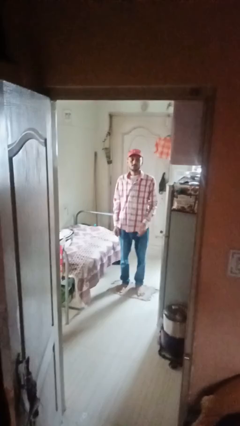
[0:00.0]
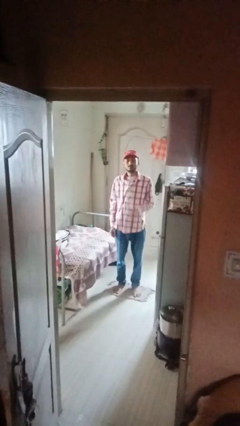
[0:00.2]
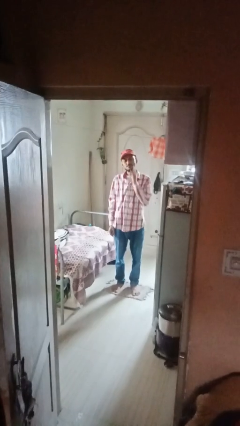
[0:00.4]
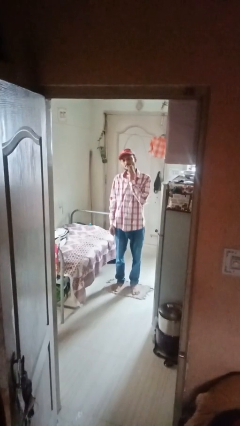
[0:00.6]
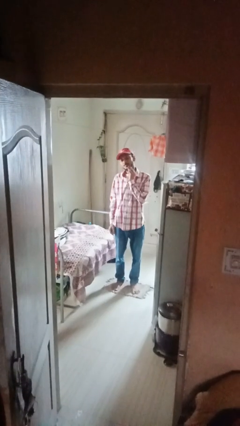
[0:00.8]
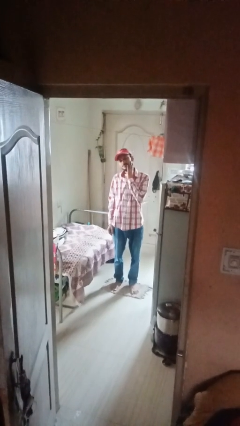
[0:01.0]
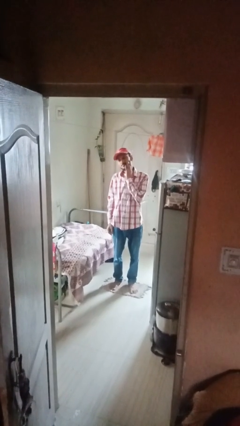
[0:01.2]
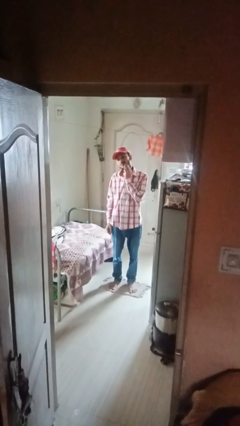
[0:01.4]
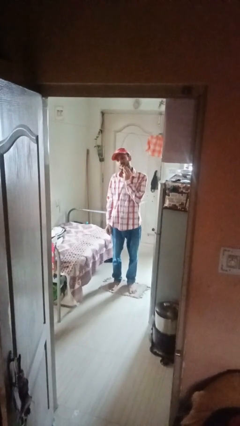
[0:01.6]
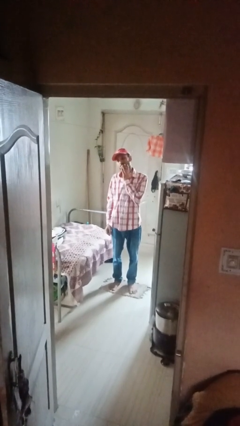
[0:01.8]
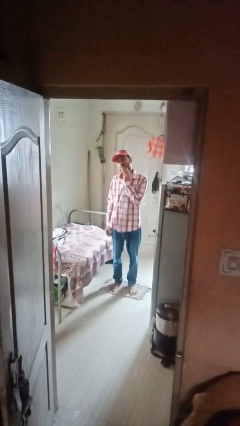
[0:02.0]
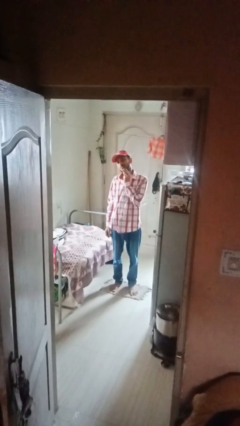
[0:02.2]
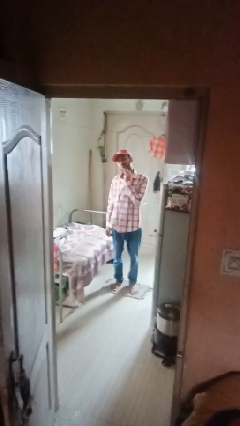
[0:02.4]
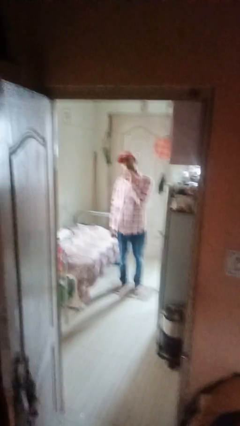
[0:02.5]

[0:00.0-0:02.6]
person strokes chin

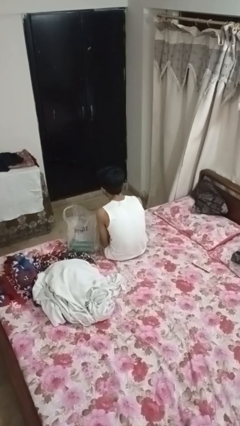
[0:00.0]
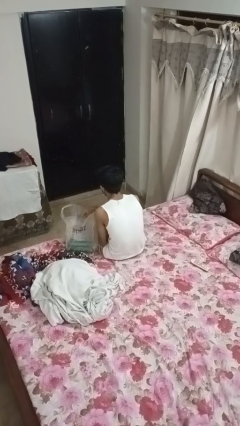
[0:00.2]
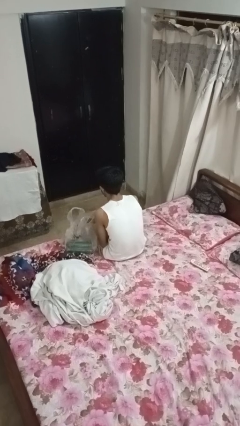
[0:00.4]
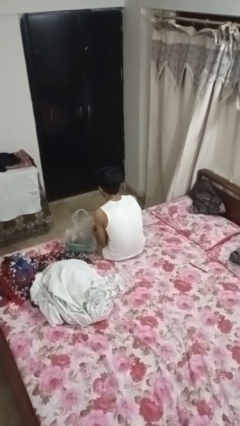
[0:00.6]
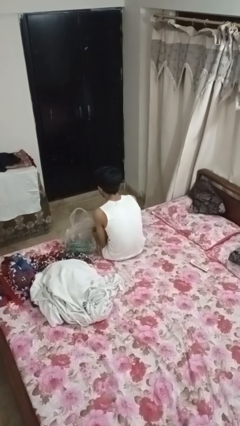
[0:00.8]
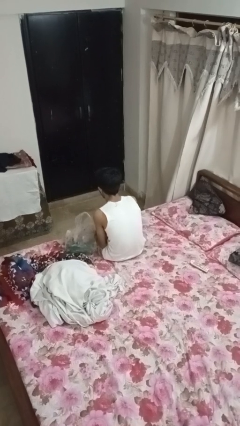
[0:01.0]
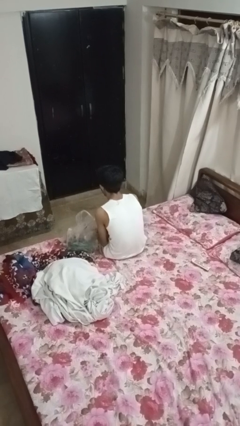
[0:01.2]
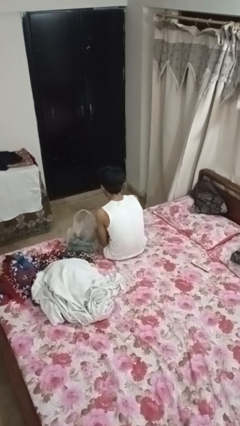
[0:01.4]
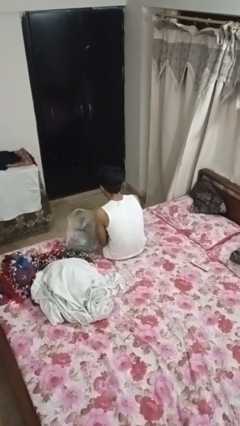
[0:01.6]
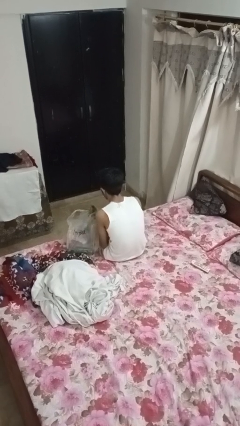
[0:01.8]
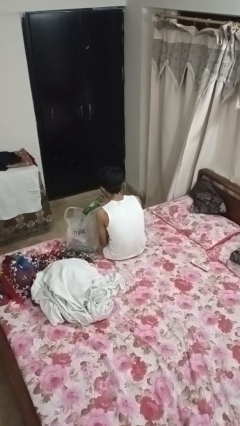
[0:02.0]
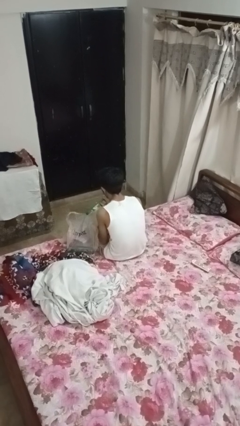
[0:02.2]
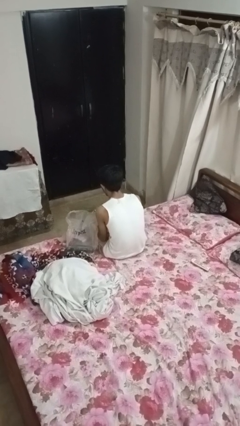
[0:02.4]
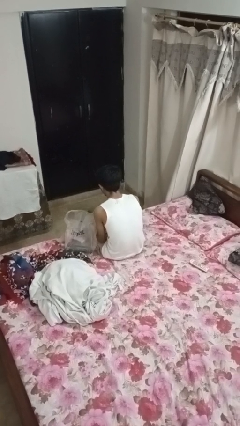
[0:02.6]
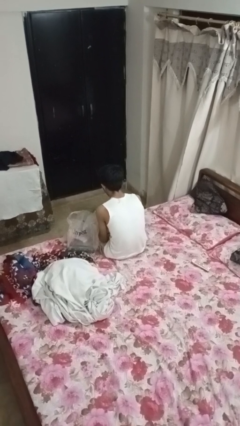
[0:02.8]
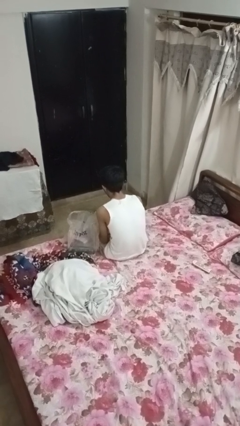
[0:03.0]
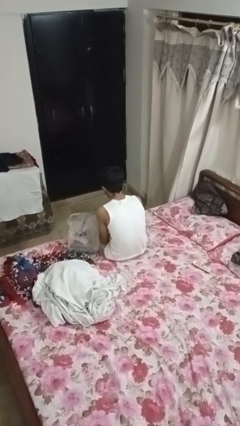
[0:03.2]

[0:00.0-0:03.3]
person takes object from bag

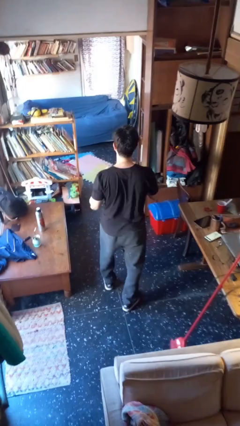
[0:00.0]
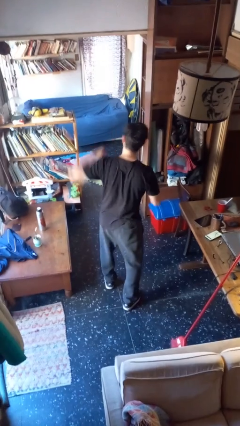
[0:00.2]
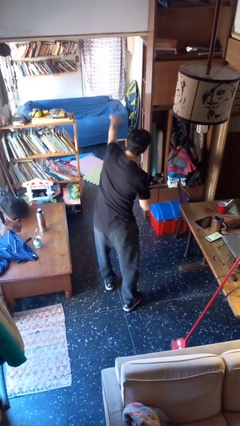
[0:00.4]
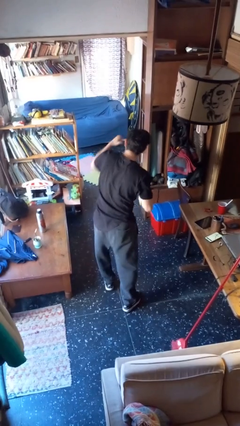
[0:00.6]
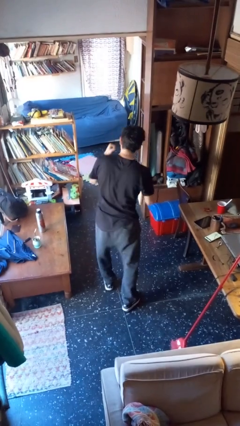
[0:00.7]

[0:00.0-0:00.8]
person punches

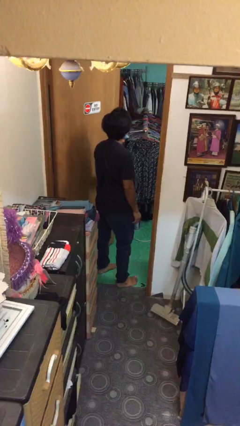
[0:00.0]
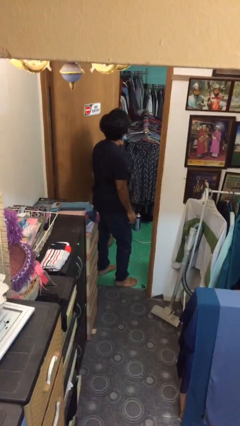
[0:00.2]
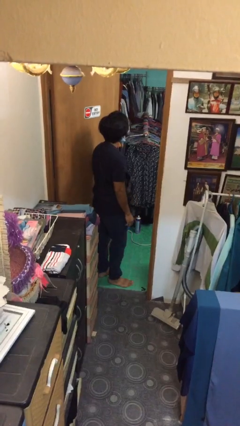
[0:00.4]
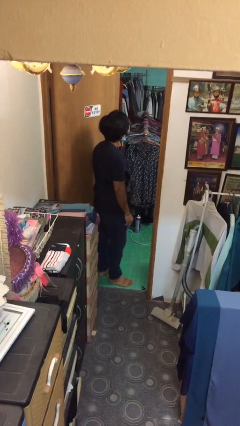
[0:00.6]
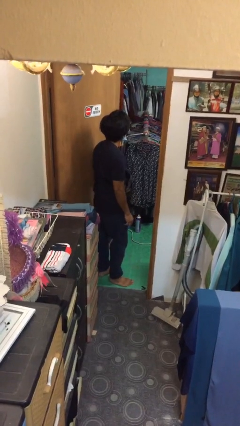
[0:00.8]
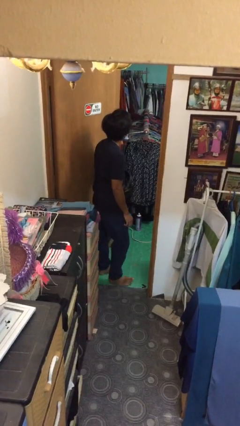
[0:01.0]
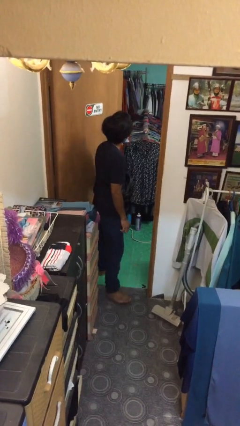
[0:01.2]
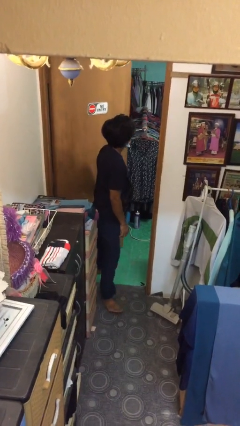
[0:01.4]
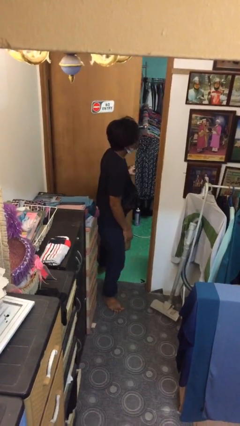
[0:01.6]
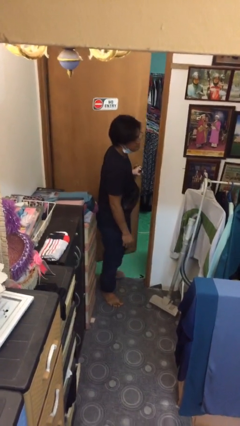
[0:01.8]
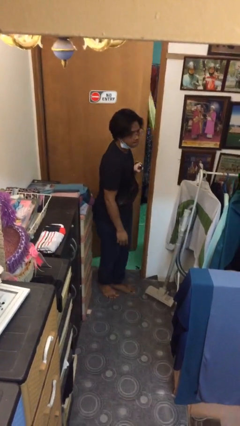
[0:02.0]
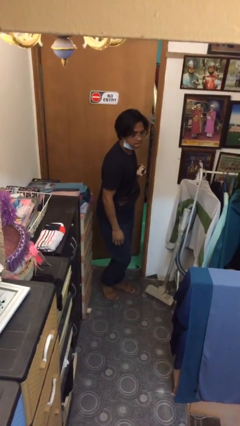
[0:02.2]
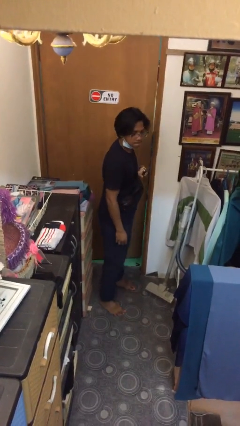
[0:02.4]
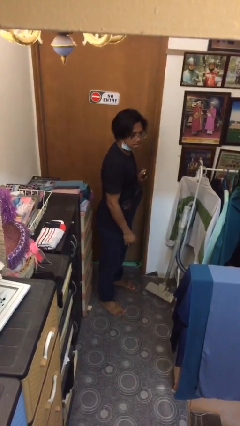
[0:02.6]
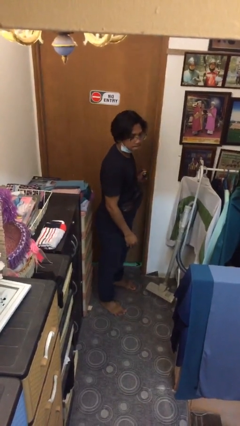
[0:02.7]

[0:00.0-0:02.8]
person closes facility door

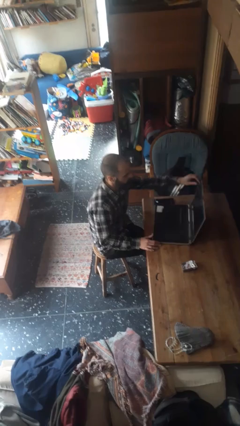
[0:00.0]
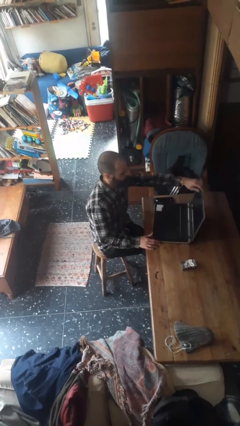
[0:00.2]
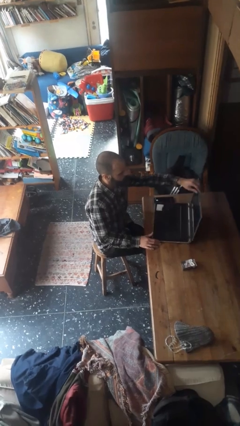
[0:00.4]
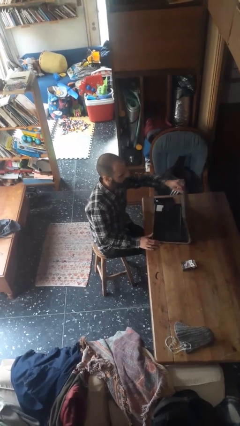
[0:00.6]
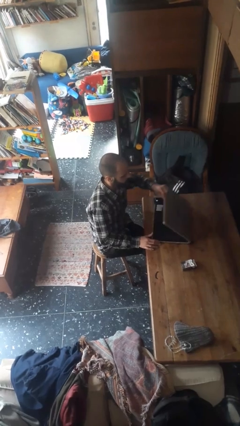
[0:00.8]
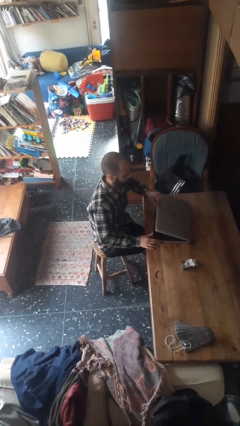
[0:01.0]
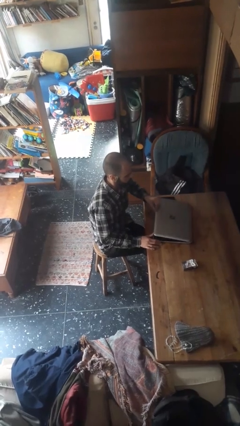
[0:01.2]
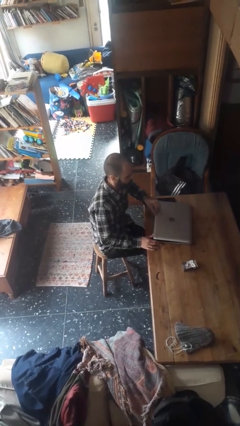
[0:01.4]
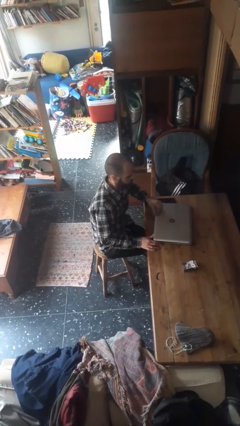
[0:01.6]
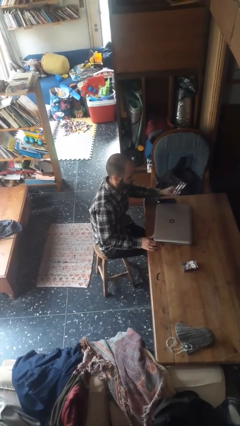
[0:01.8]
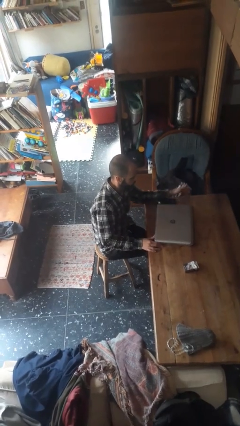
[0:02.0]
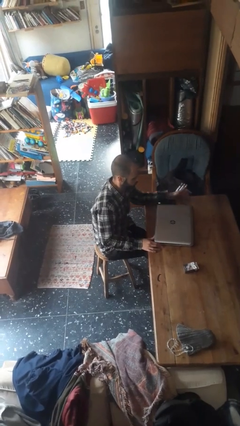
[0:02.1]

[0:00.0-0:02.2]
person closes laptop

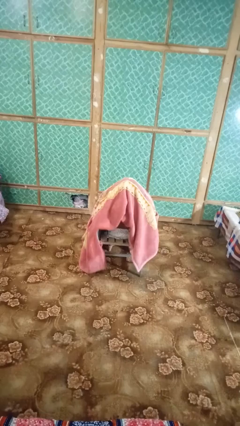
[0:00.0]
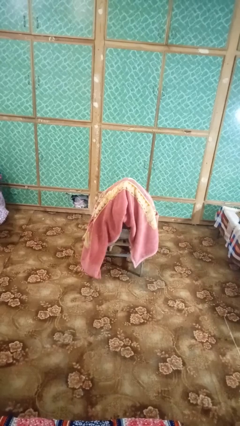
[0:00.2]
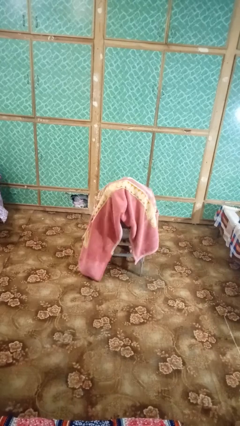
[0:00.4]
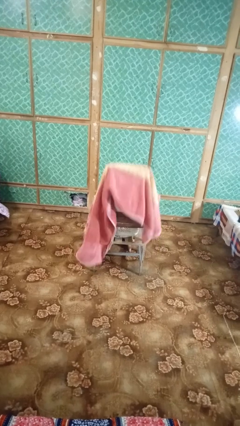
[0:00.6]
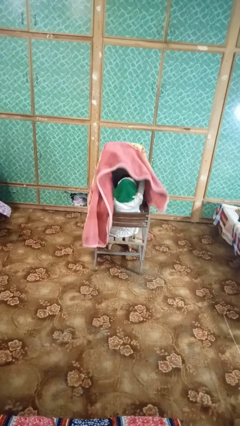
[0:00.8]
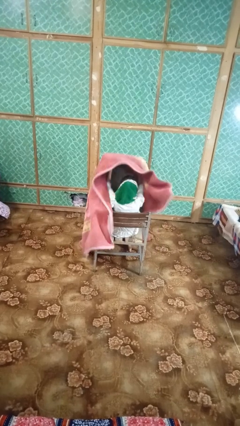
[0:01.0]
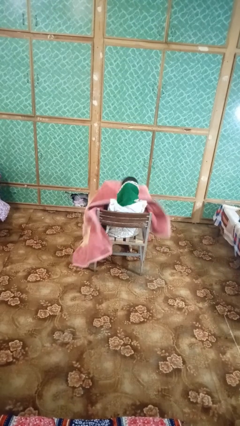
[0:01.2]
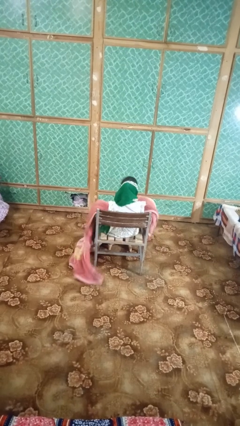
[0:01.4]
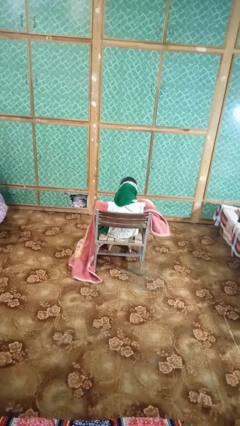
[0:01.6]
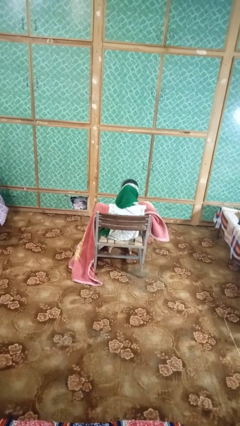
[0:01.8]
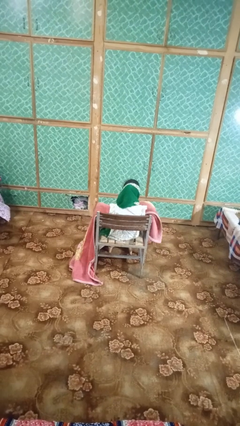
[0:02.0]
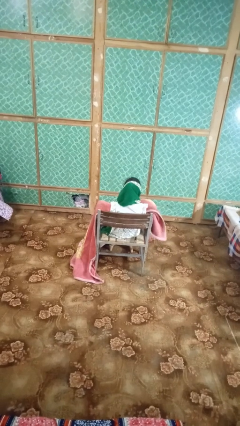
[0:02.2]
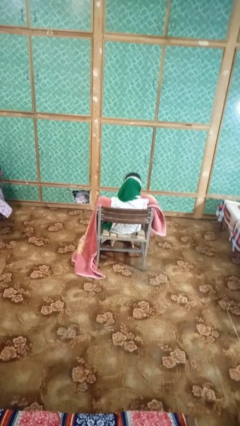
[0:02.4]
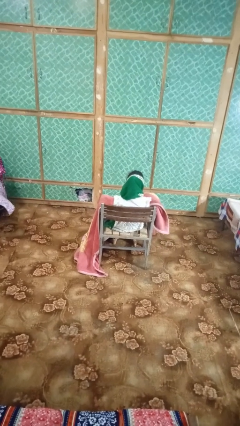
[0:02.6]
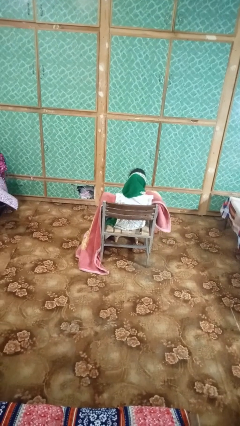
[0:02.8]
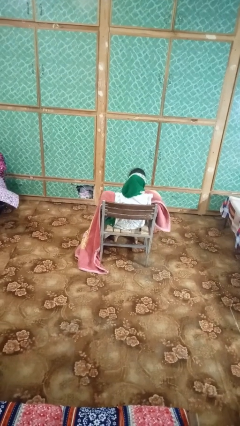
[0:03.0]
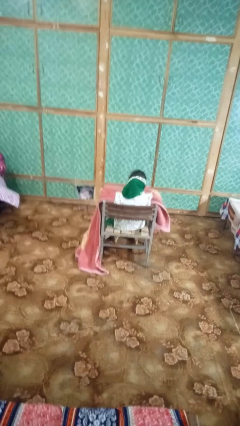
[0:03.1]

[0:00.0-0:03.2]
person uncovers with blanket

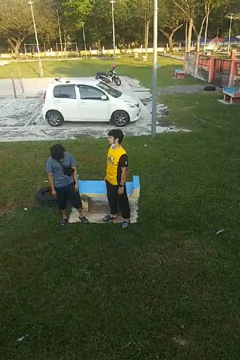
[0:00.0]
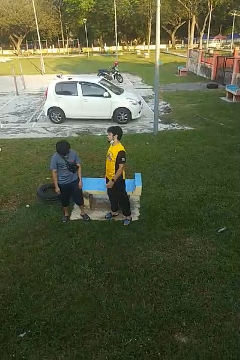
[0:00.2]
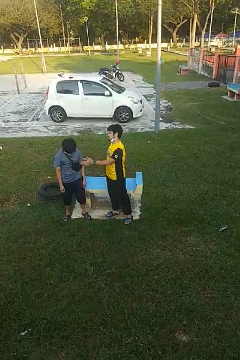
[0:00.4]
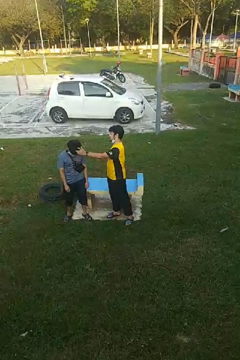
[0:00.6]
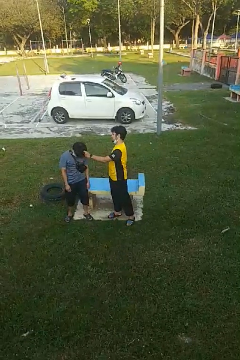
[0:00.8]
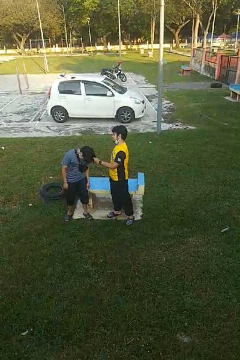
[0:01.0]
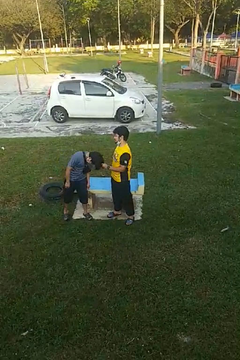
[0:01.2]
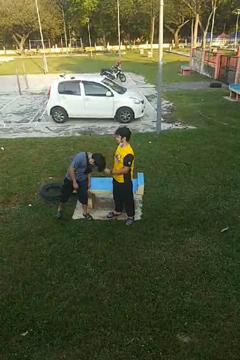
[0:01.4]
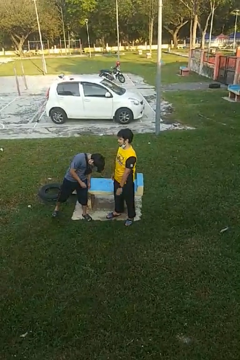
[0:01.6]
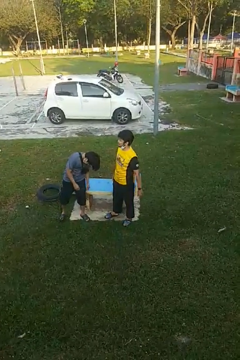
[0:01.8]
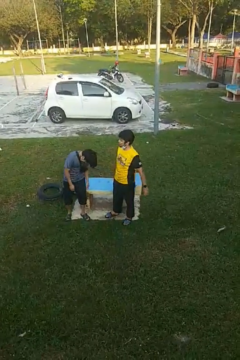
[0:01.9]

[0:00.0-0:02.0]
person grabs person by hair

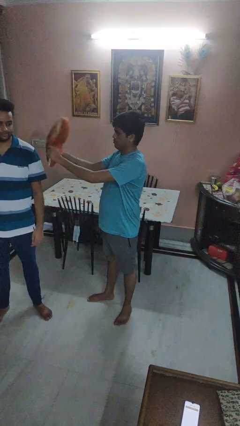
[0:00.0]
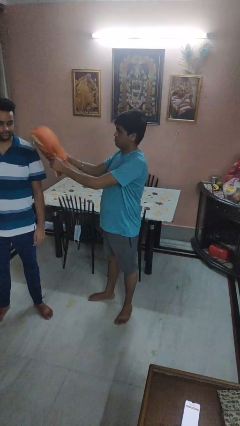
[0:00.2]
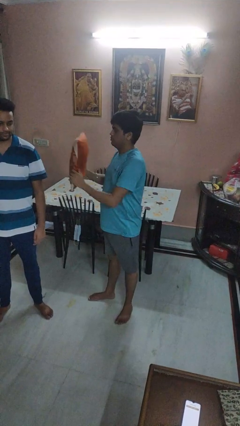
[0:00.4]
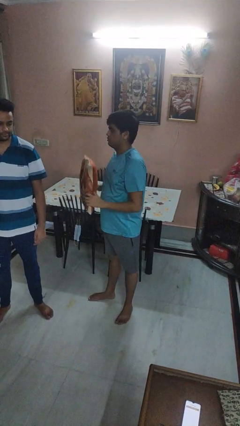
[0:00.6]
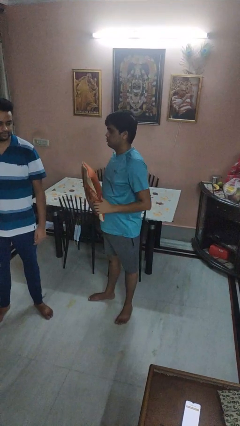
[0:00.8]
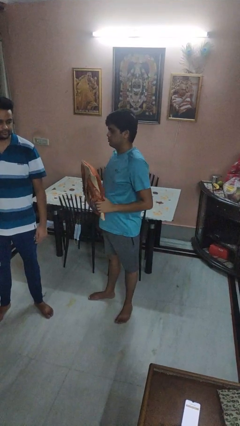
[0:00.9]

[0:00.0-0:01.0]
person hits person with pillow
